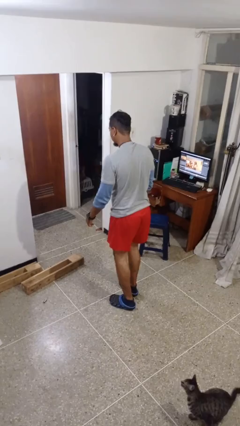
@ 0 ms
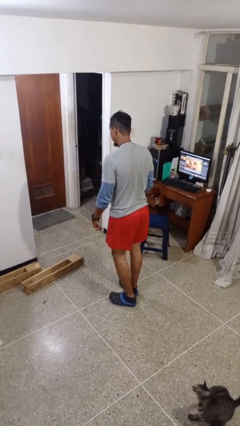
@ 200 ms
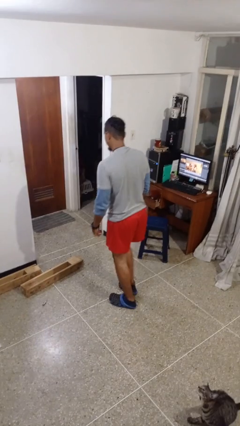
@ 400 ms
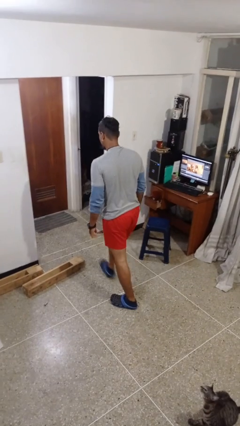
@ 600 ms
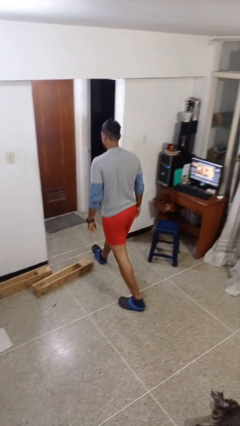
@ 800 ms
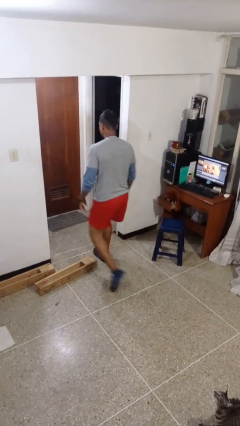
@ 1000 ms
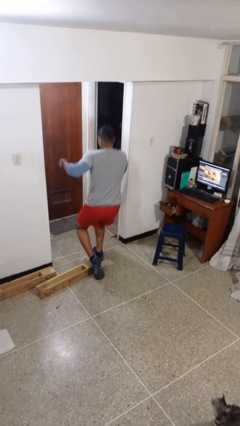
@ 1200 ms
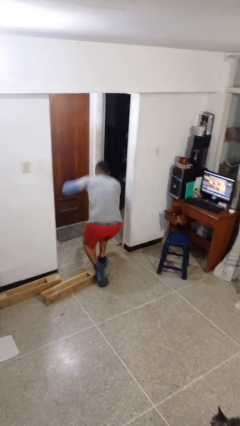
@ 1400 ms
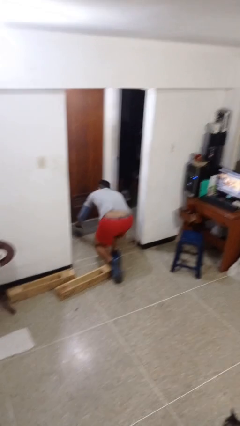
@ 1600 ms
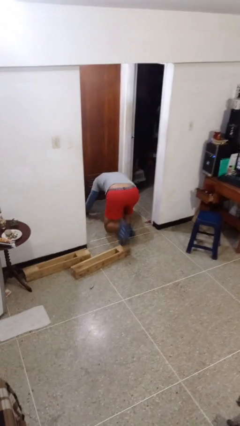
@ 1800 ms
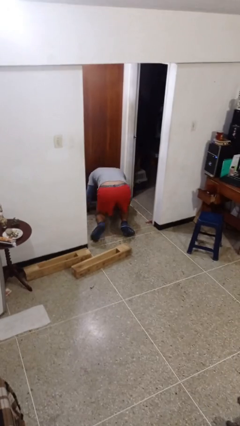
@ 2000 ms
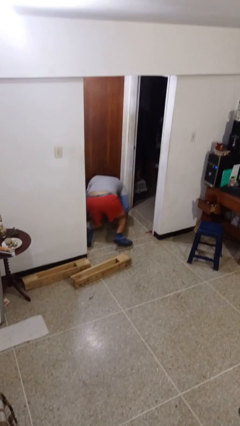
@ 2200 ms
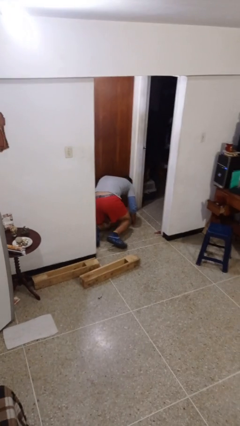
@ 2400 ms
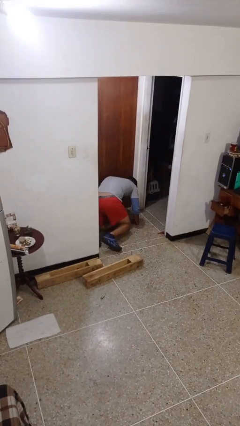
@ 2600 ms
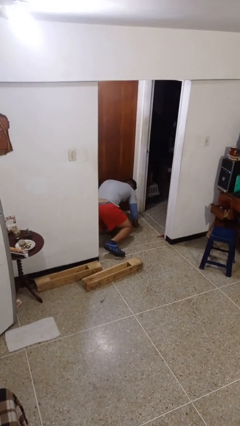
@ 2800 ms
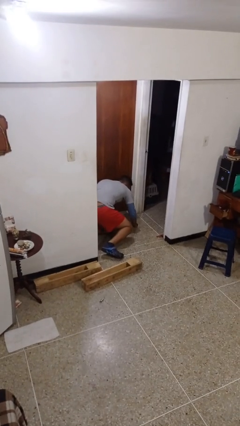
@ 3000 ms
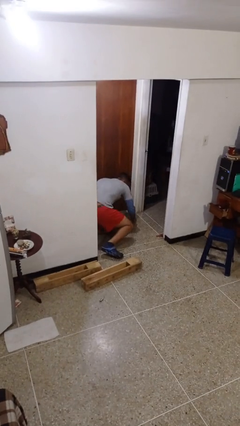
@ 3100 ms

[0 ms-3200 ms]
person trips on object on floor

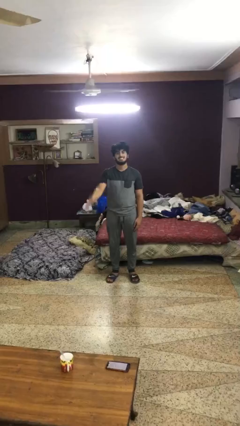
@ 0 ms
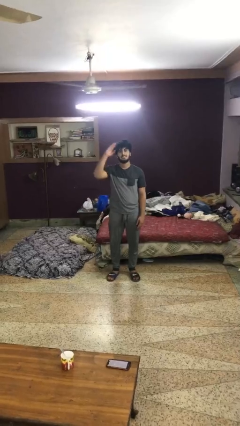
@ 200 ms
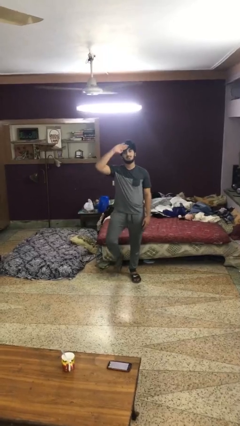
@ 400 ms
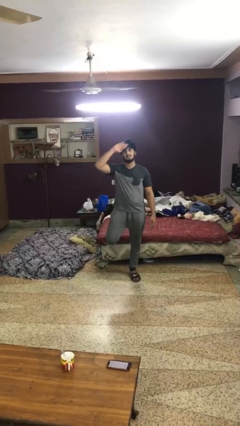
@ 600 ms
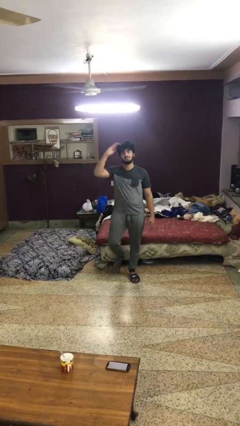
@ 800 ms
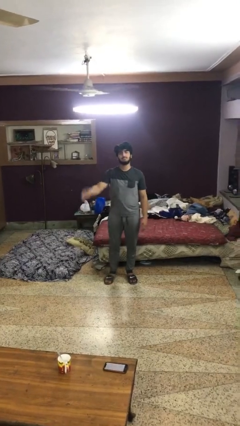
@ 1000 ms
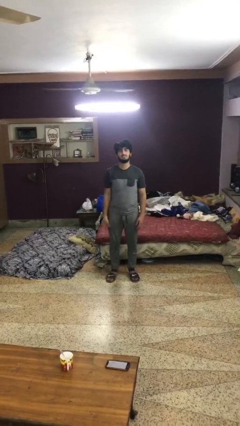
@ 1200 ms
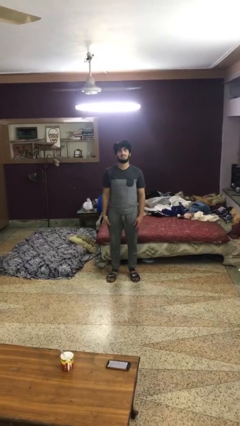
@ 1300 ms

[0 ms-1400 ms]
person salutes

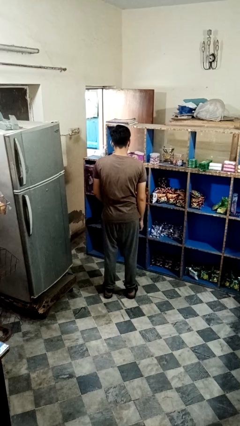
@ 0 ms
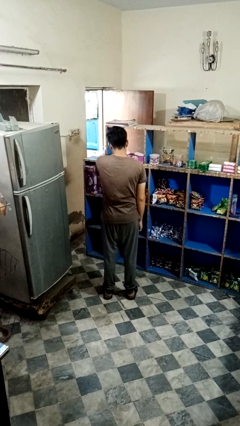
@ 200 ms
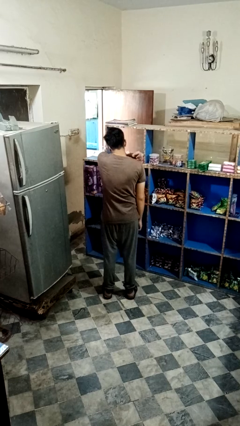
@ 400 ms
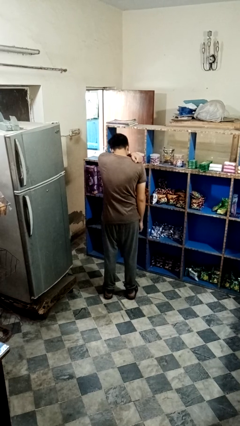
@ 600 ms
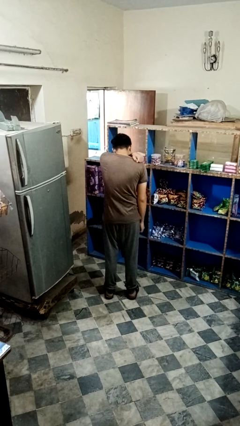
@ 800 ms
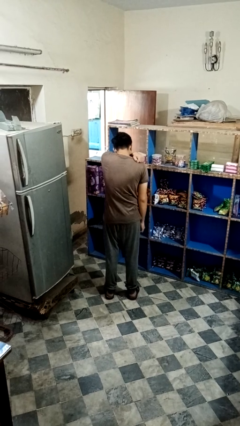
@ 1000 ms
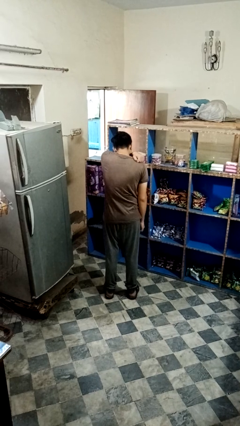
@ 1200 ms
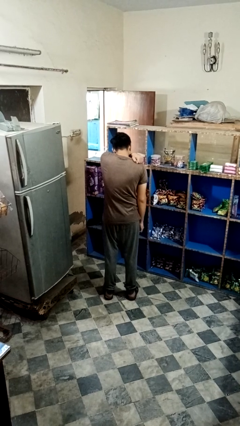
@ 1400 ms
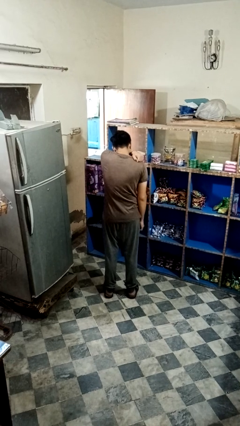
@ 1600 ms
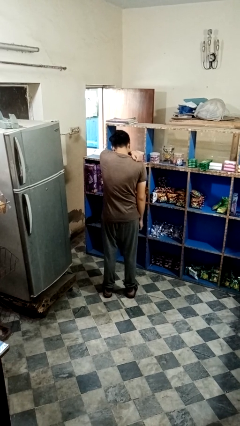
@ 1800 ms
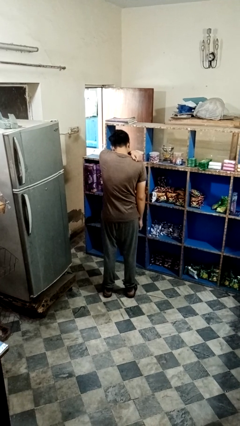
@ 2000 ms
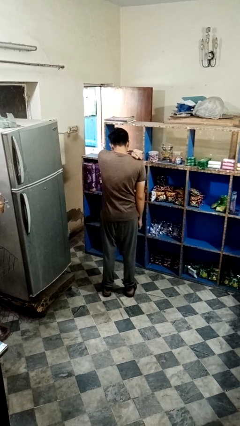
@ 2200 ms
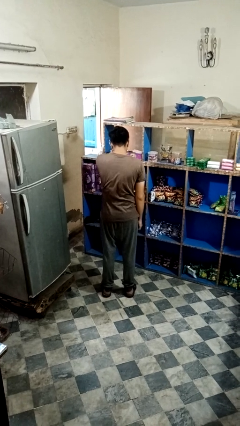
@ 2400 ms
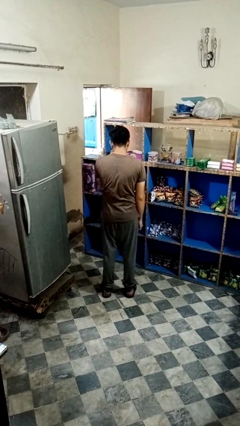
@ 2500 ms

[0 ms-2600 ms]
person sneezes into arm

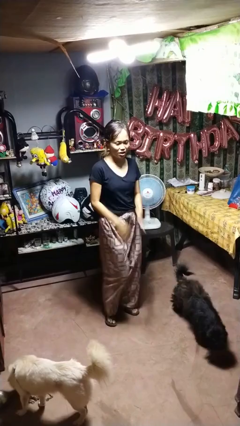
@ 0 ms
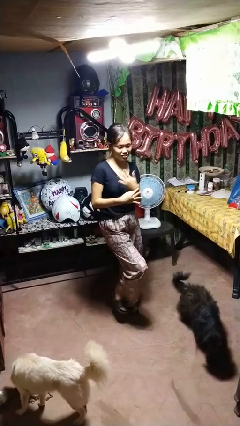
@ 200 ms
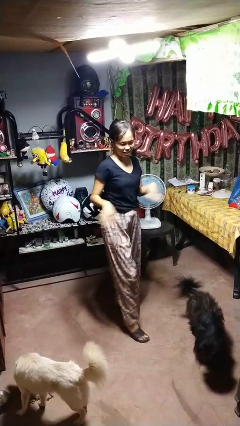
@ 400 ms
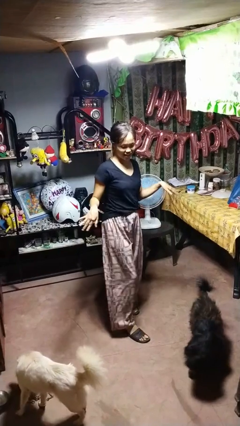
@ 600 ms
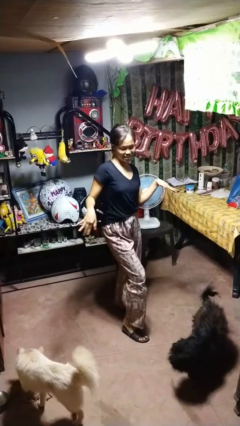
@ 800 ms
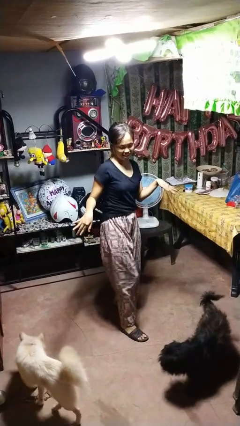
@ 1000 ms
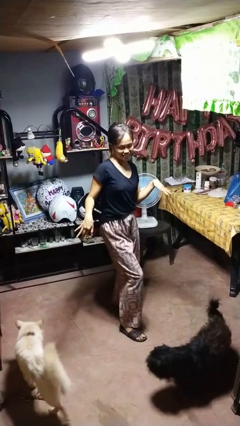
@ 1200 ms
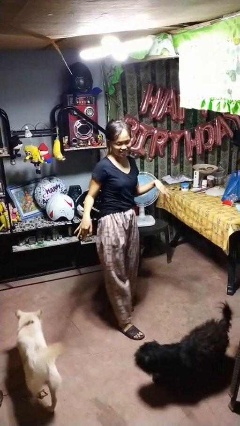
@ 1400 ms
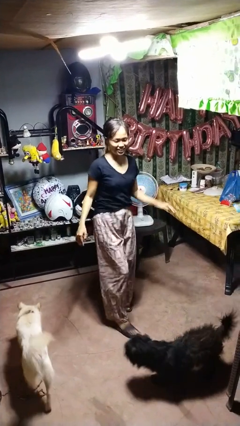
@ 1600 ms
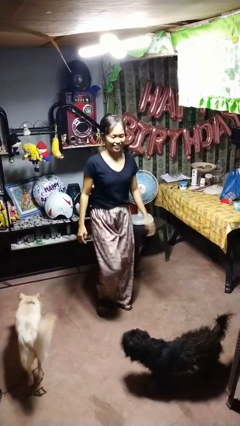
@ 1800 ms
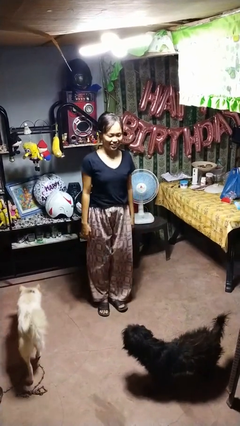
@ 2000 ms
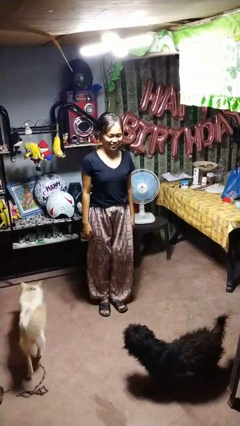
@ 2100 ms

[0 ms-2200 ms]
person dances in place

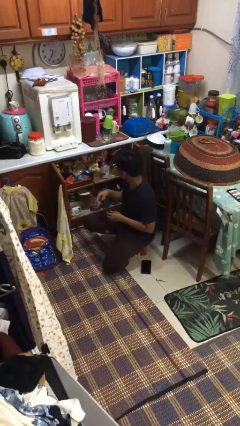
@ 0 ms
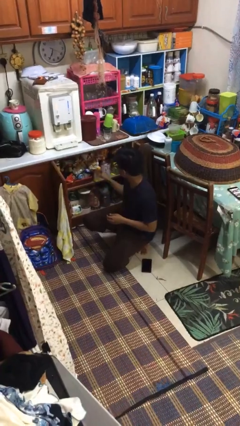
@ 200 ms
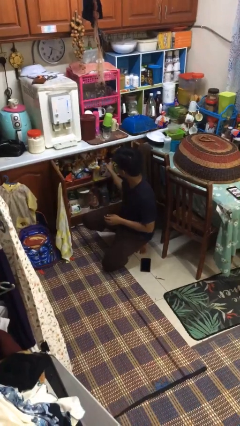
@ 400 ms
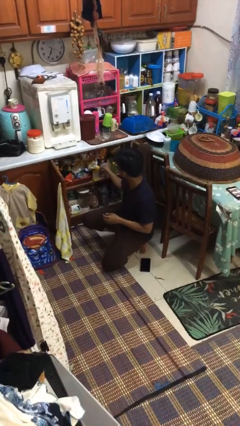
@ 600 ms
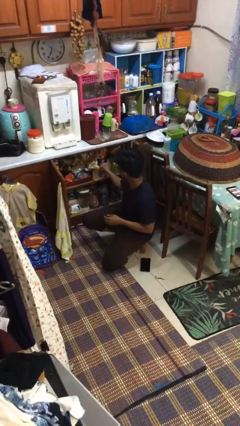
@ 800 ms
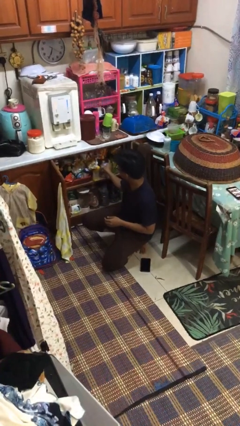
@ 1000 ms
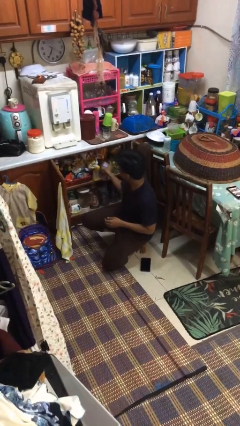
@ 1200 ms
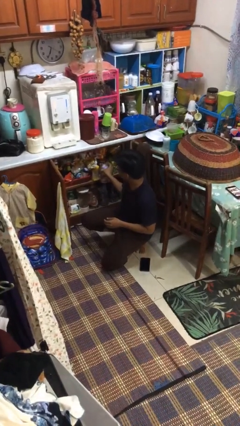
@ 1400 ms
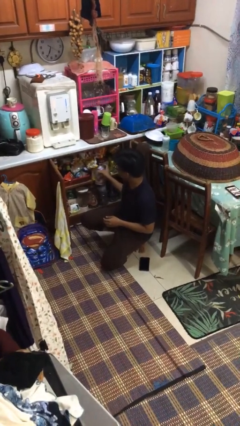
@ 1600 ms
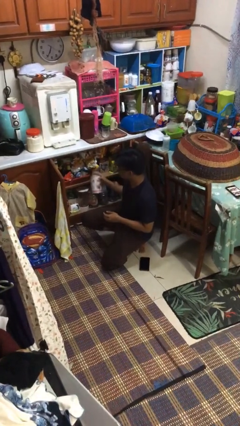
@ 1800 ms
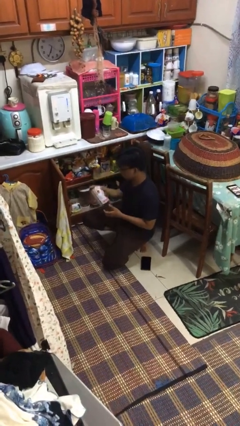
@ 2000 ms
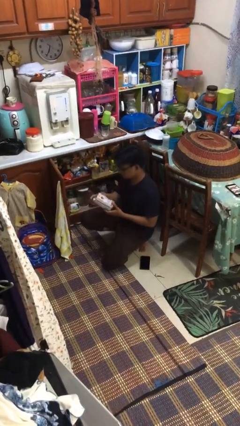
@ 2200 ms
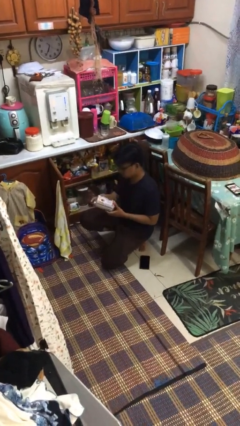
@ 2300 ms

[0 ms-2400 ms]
person takes object from cabinet

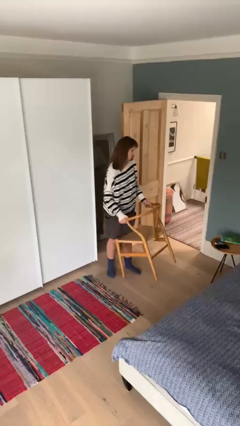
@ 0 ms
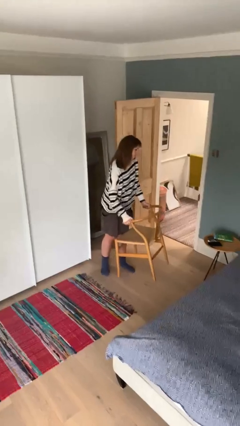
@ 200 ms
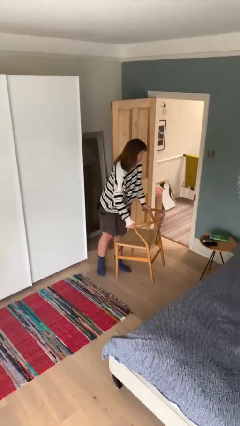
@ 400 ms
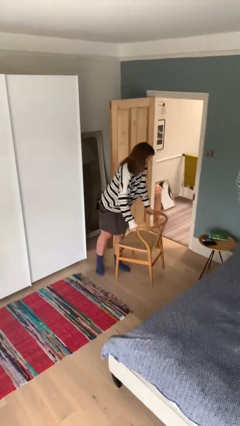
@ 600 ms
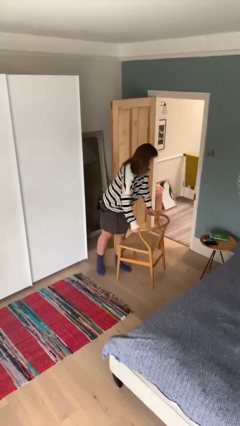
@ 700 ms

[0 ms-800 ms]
person puts down object on floor

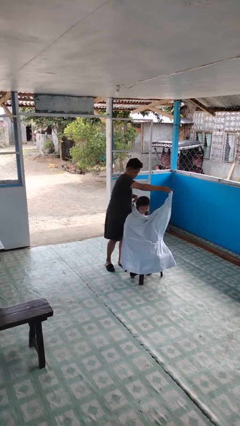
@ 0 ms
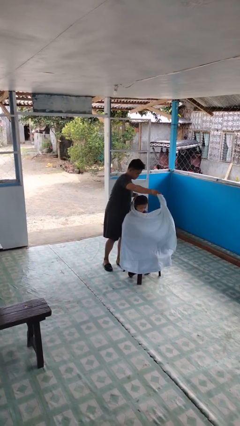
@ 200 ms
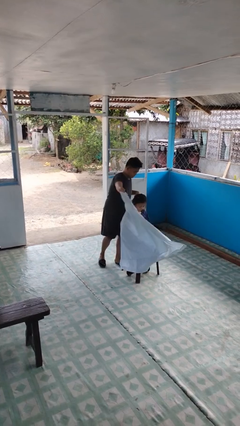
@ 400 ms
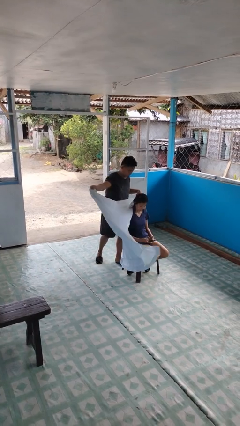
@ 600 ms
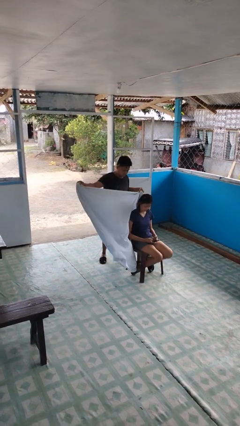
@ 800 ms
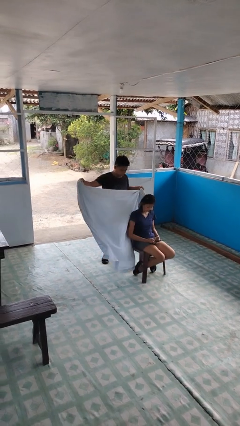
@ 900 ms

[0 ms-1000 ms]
person uncovers friend with blanket

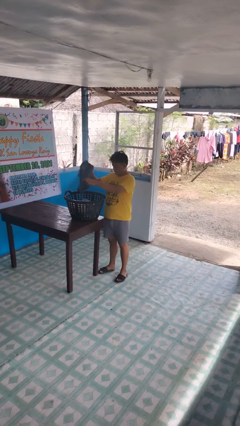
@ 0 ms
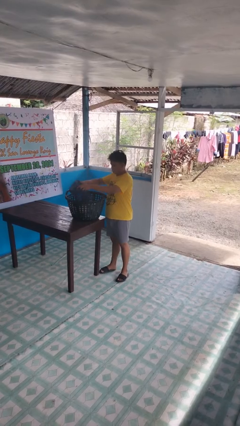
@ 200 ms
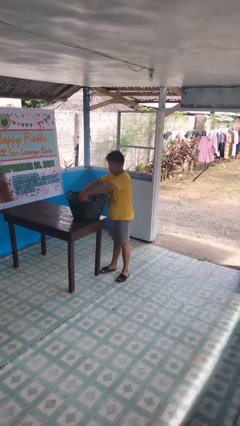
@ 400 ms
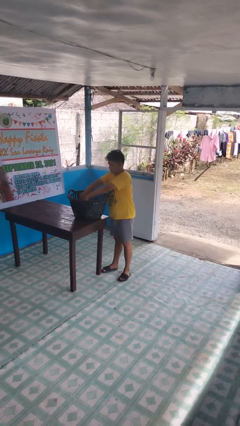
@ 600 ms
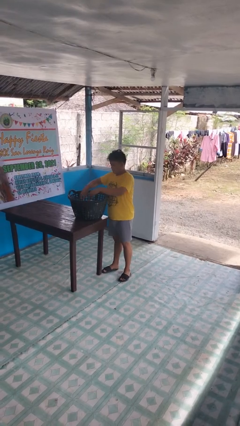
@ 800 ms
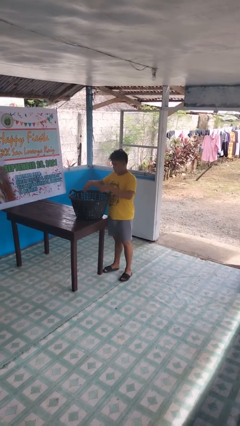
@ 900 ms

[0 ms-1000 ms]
person puts object into basket

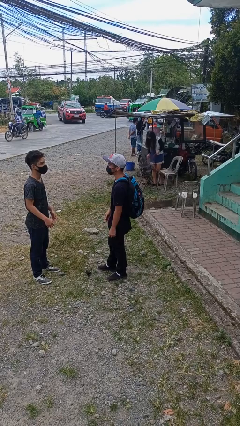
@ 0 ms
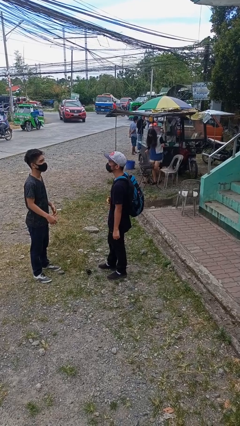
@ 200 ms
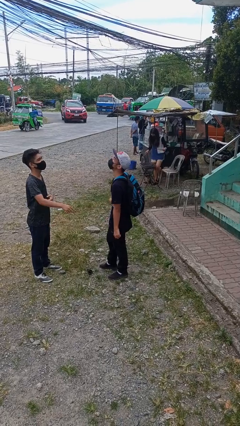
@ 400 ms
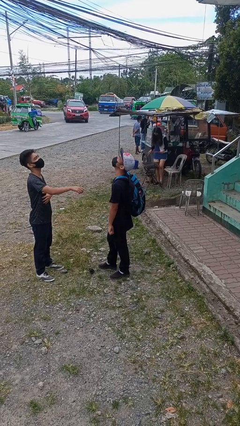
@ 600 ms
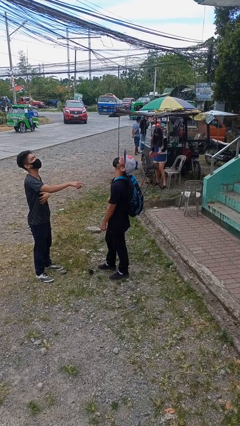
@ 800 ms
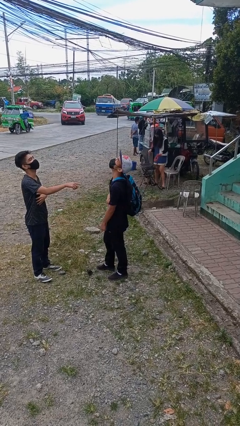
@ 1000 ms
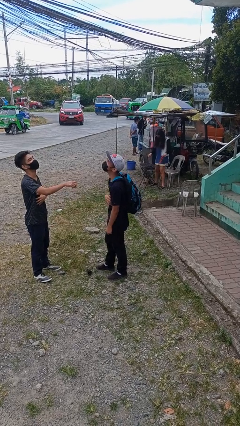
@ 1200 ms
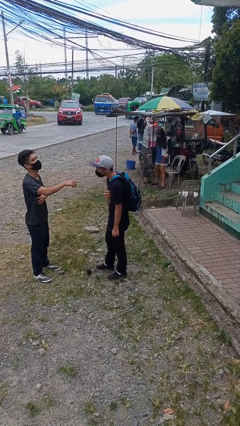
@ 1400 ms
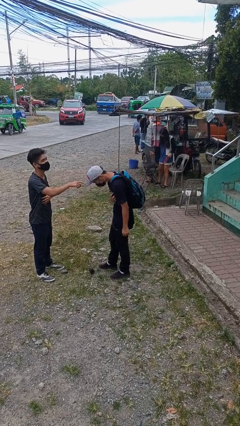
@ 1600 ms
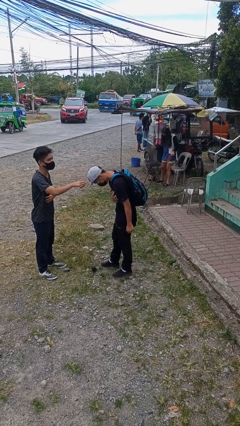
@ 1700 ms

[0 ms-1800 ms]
person laughs with person

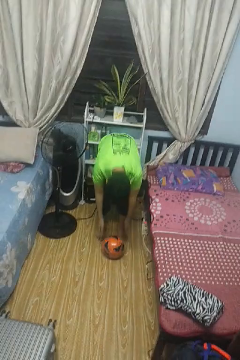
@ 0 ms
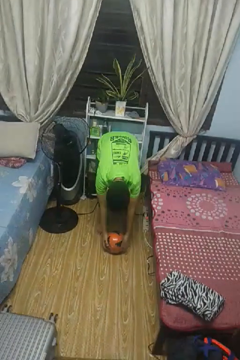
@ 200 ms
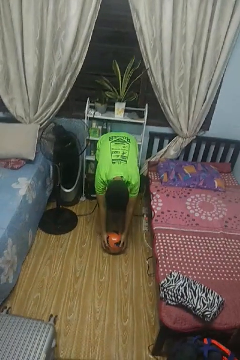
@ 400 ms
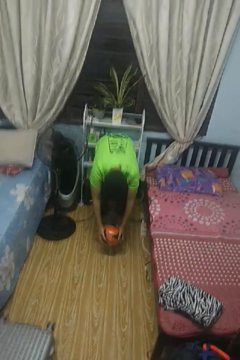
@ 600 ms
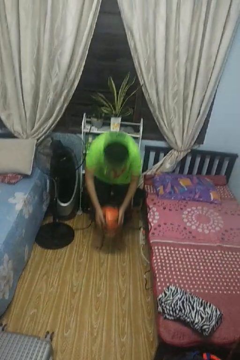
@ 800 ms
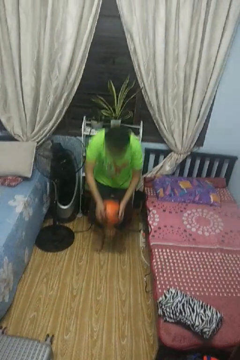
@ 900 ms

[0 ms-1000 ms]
person picks up object from floor
